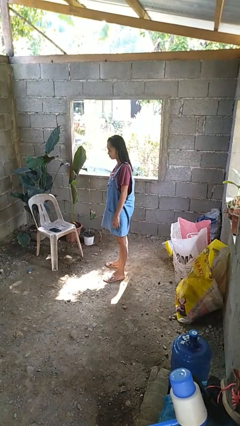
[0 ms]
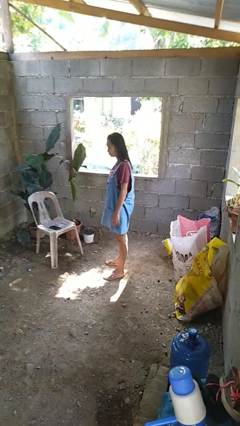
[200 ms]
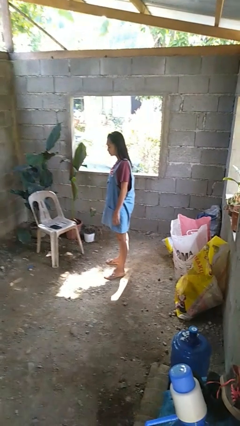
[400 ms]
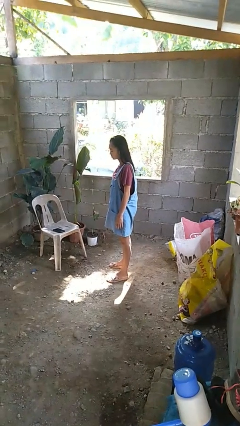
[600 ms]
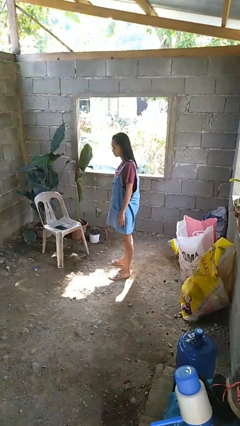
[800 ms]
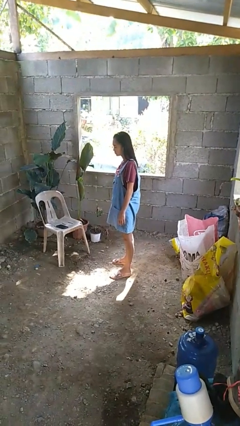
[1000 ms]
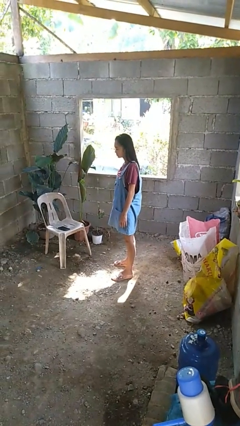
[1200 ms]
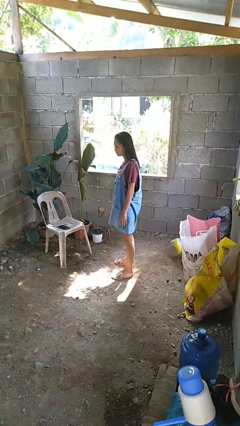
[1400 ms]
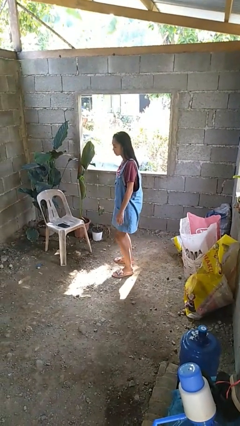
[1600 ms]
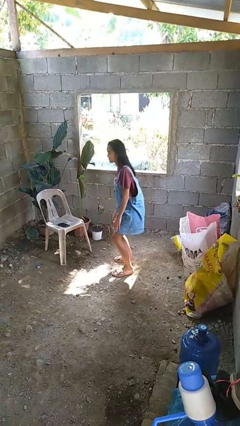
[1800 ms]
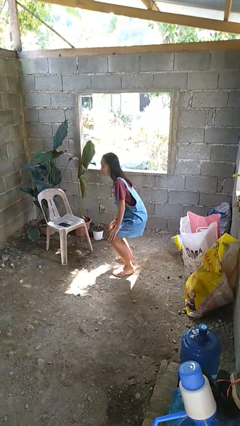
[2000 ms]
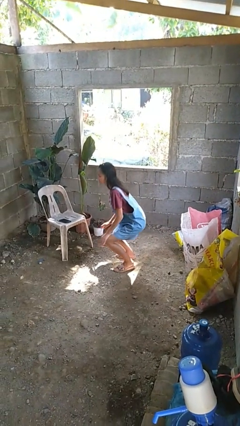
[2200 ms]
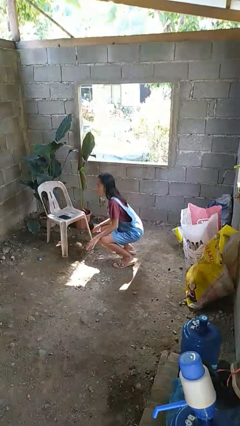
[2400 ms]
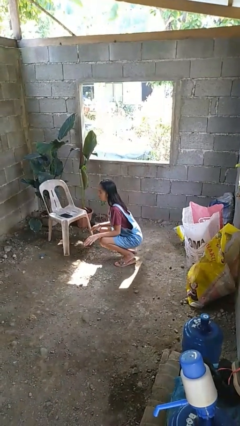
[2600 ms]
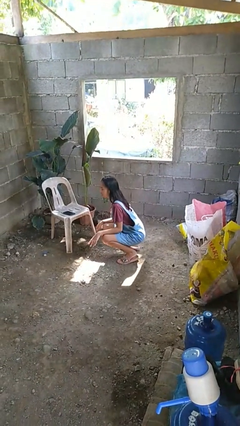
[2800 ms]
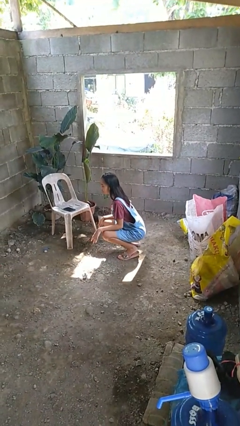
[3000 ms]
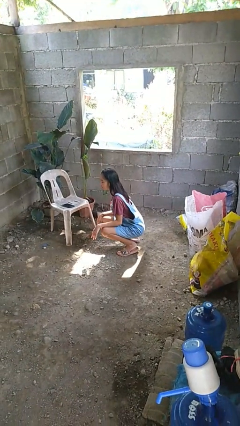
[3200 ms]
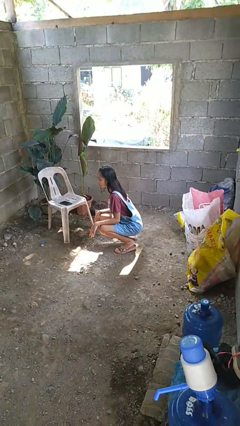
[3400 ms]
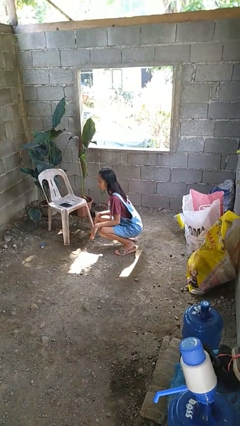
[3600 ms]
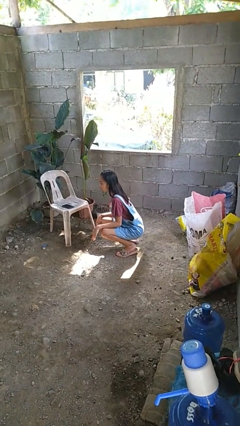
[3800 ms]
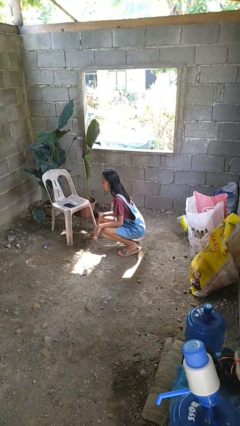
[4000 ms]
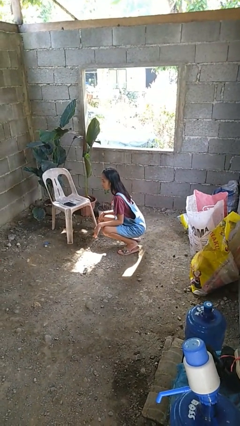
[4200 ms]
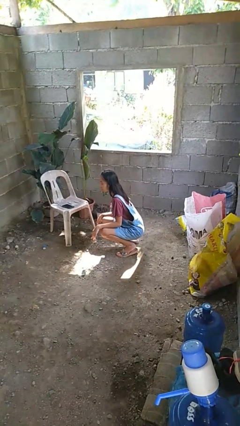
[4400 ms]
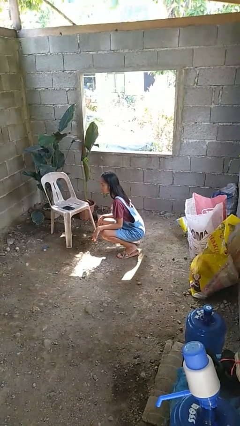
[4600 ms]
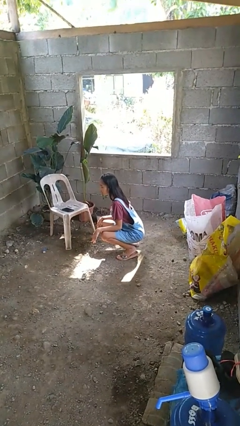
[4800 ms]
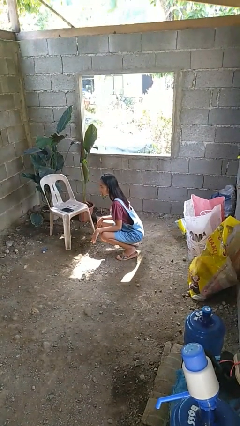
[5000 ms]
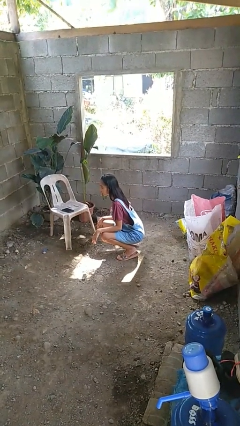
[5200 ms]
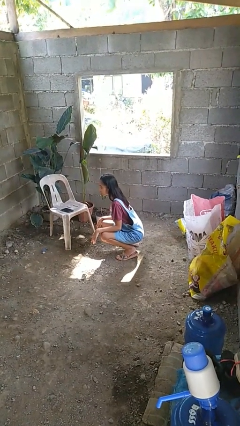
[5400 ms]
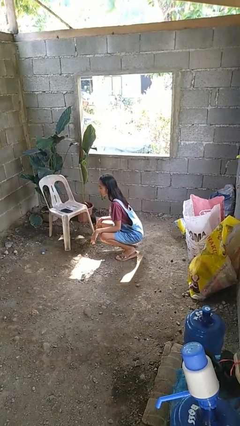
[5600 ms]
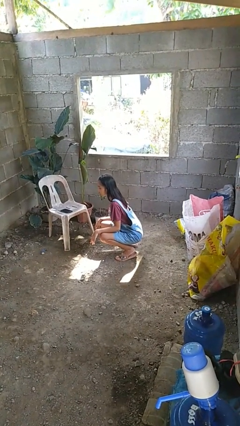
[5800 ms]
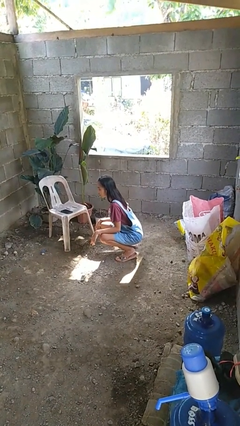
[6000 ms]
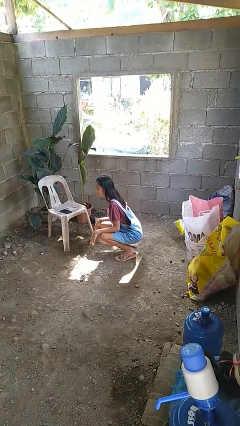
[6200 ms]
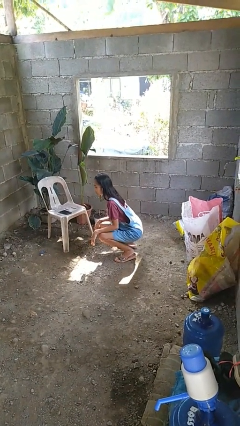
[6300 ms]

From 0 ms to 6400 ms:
person squats

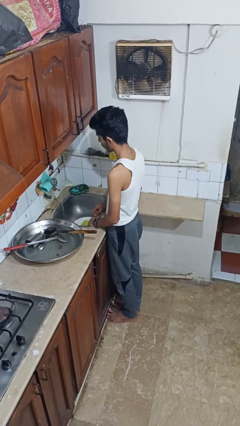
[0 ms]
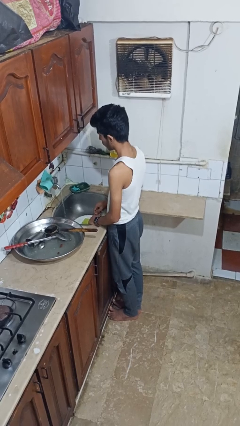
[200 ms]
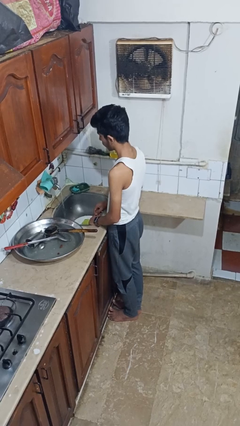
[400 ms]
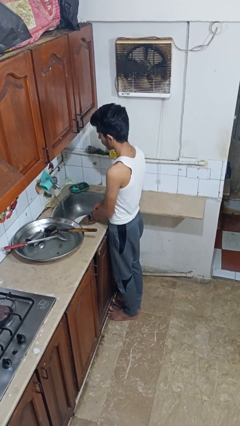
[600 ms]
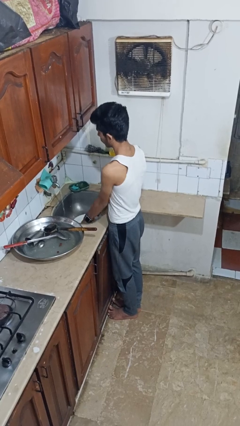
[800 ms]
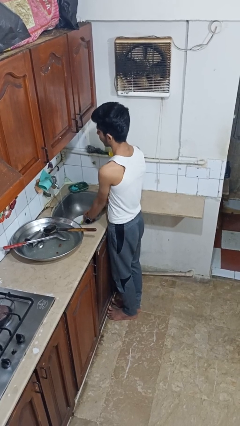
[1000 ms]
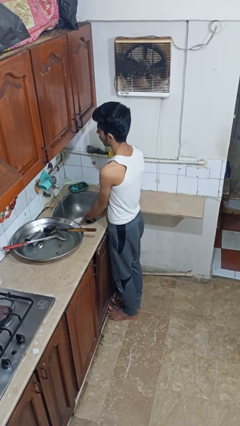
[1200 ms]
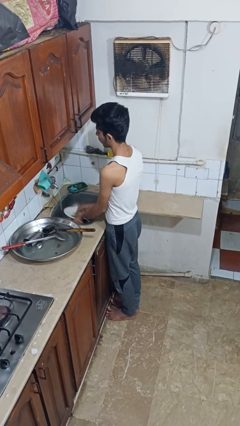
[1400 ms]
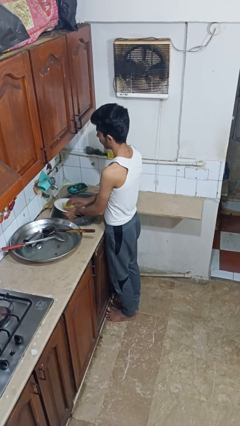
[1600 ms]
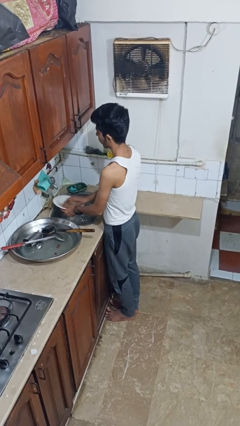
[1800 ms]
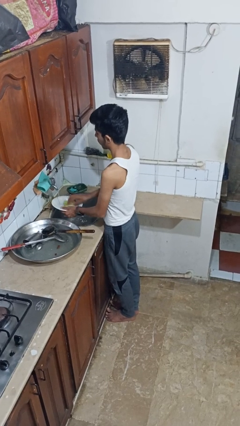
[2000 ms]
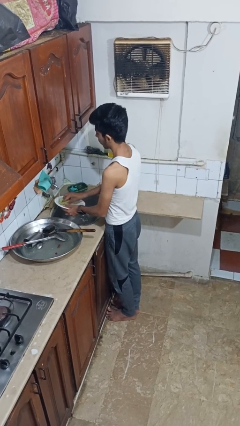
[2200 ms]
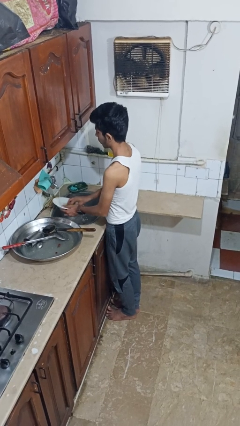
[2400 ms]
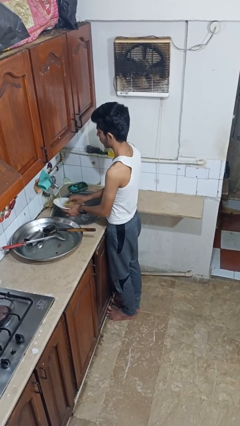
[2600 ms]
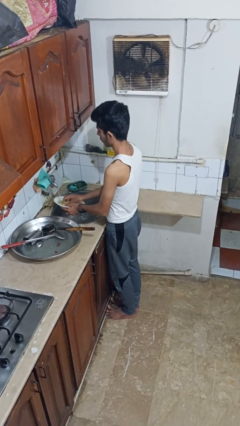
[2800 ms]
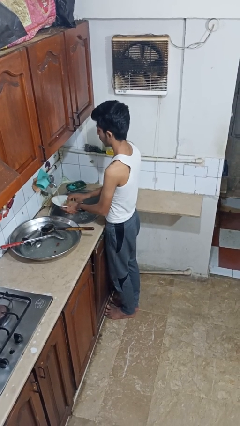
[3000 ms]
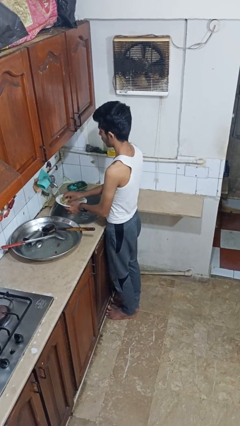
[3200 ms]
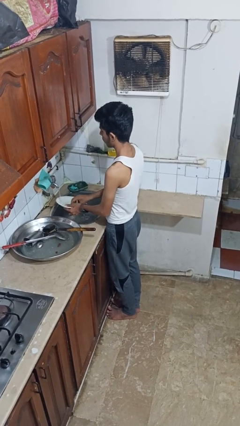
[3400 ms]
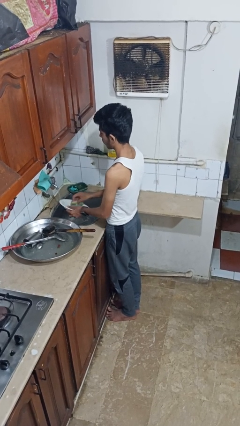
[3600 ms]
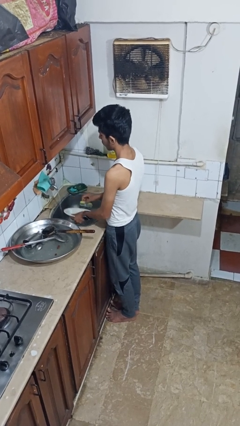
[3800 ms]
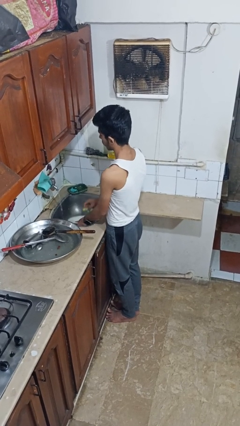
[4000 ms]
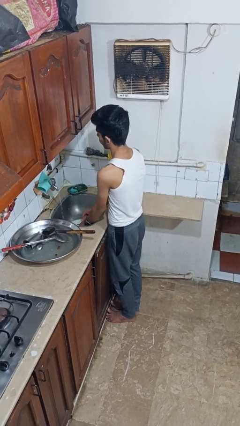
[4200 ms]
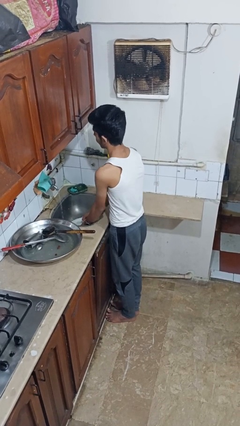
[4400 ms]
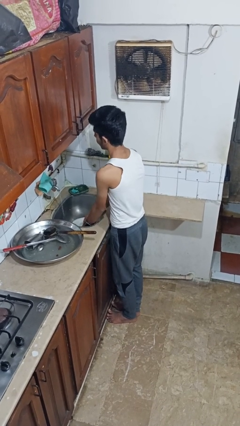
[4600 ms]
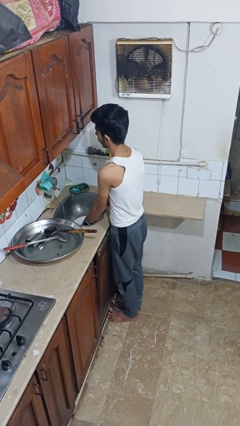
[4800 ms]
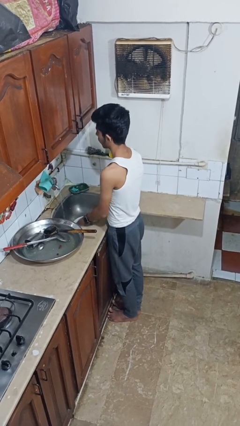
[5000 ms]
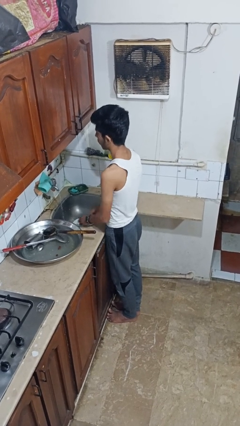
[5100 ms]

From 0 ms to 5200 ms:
person washes dish

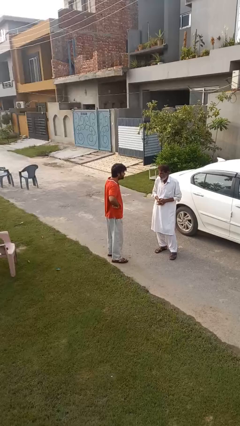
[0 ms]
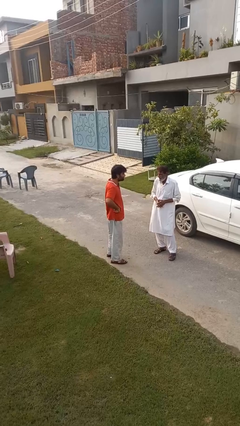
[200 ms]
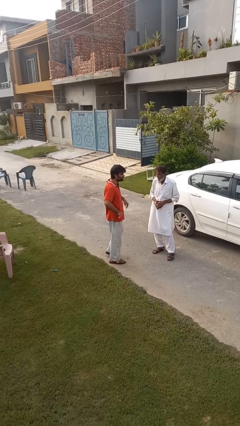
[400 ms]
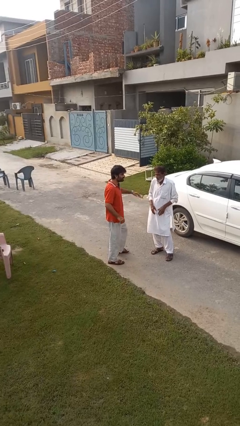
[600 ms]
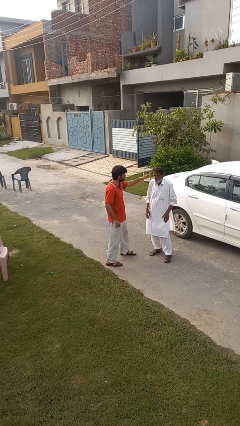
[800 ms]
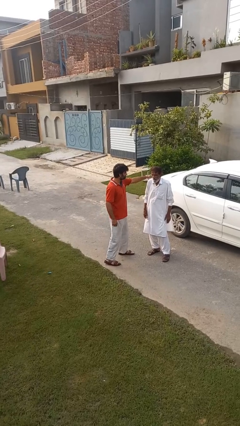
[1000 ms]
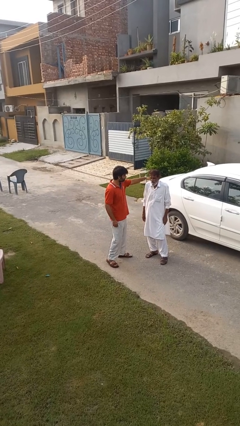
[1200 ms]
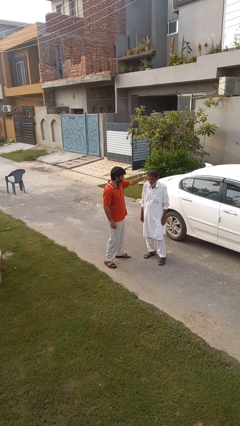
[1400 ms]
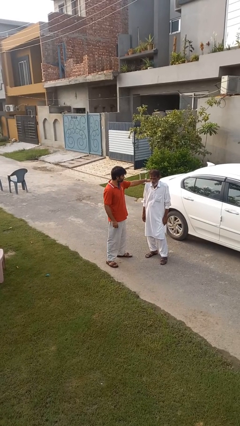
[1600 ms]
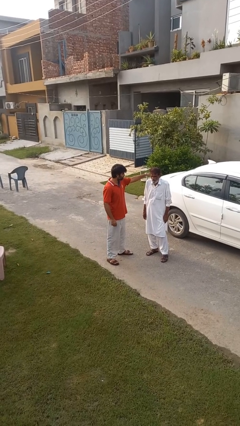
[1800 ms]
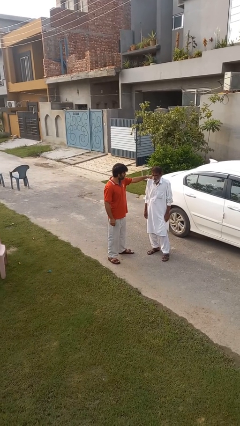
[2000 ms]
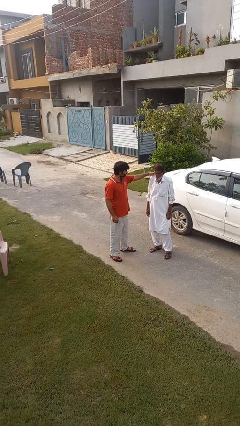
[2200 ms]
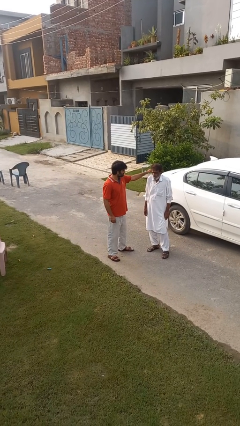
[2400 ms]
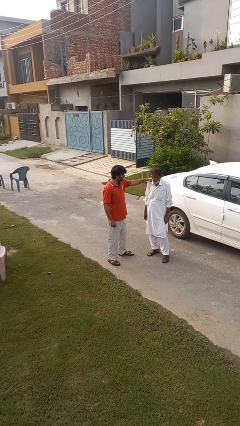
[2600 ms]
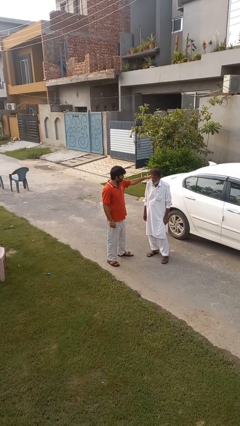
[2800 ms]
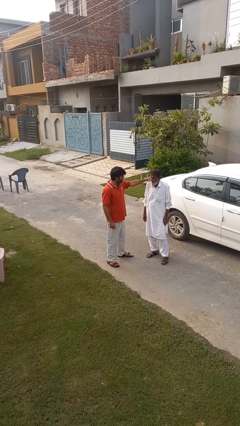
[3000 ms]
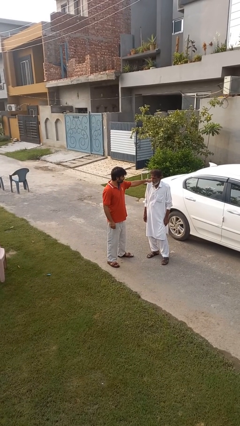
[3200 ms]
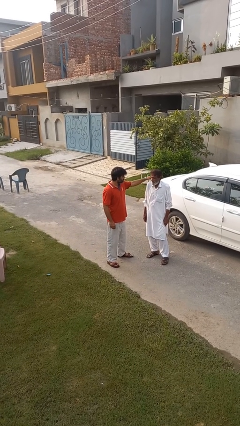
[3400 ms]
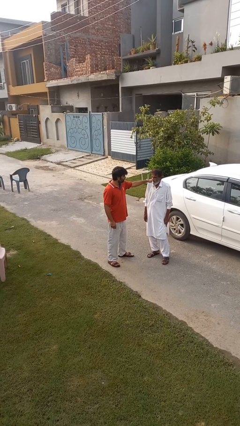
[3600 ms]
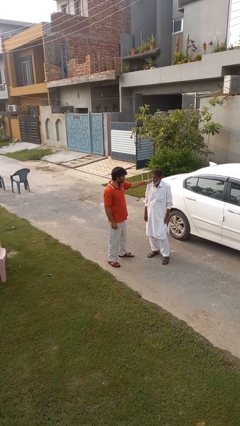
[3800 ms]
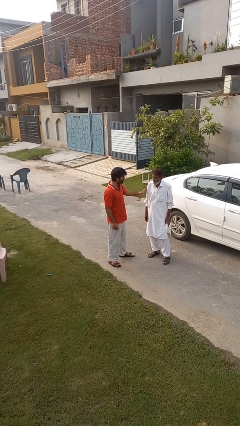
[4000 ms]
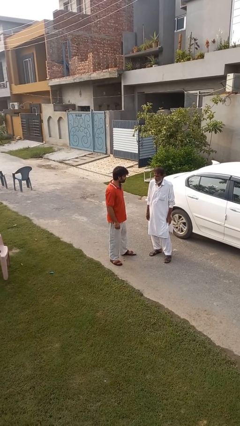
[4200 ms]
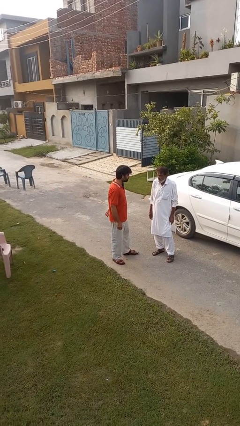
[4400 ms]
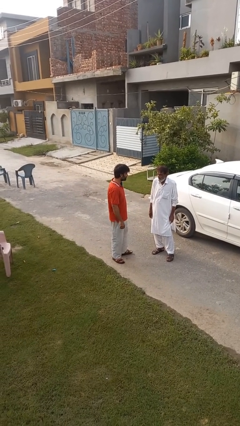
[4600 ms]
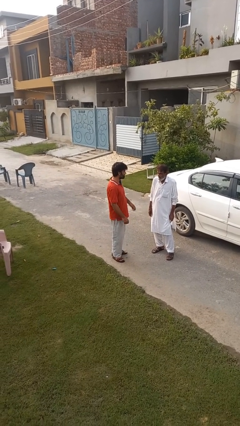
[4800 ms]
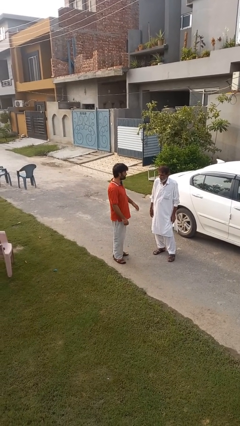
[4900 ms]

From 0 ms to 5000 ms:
person pounds shoulders of person

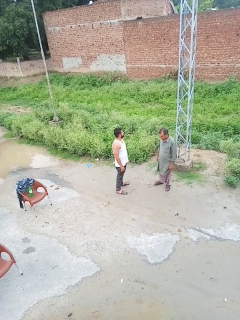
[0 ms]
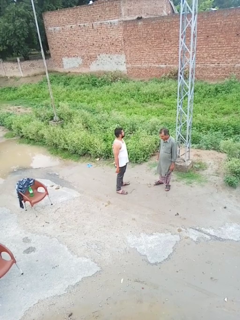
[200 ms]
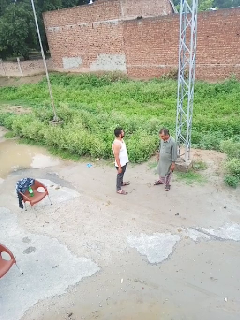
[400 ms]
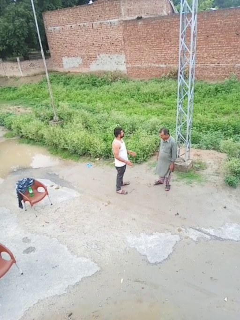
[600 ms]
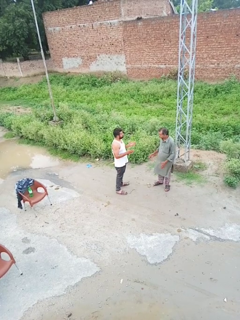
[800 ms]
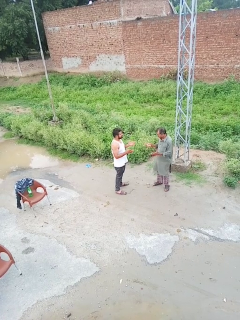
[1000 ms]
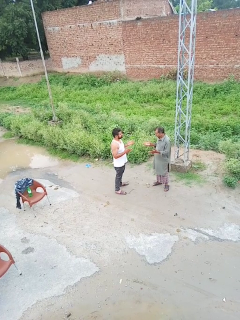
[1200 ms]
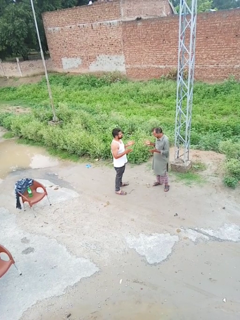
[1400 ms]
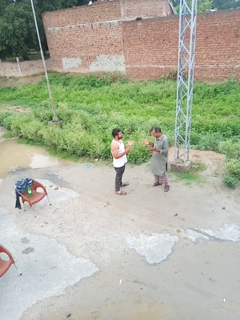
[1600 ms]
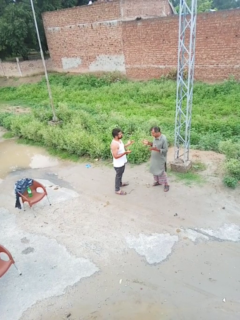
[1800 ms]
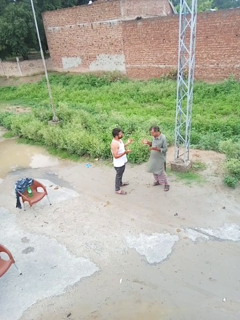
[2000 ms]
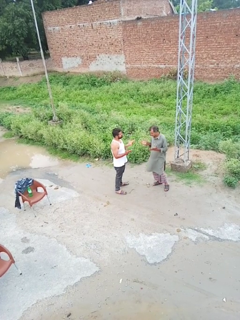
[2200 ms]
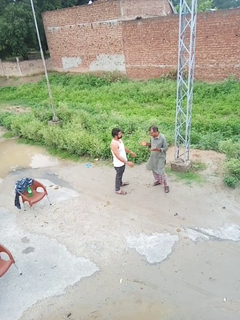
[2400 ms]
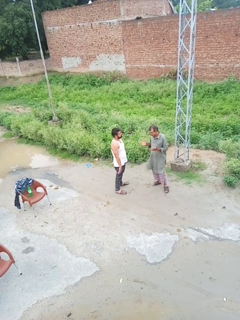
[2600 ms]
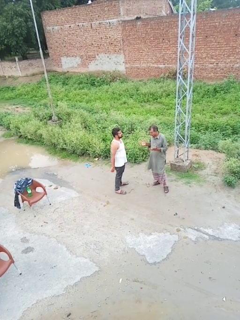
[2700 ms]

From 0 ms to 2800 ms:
person talks to person
